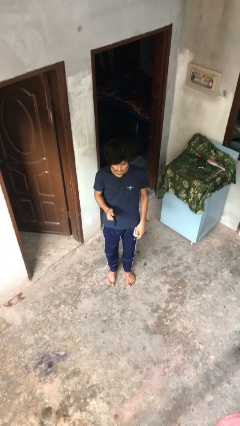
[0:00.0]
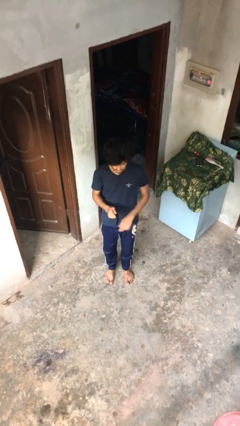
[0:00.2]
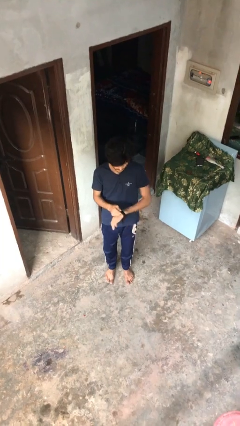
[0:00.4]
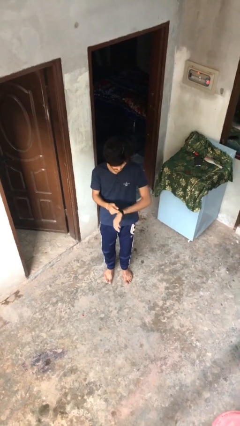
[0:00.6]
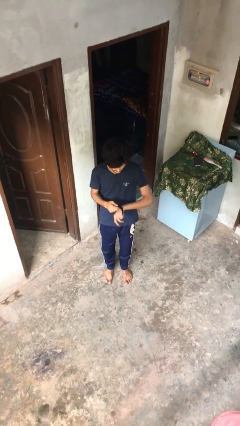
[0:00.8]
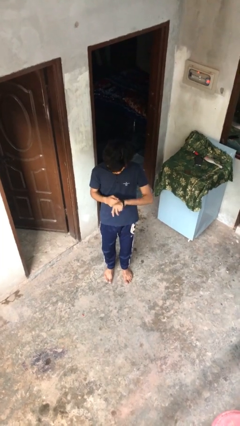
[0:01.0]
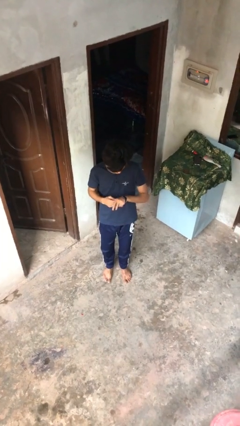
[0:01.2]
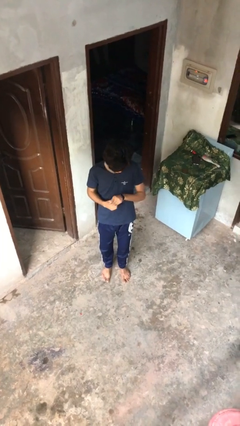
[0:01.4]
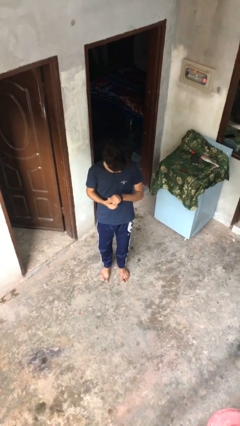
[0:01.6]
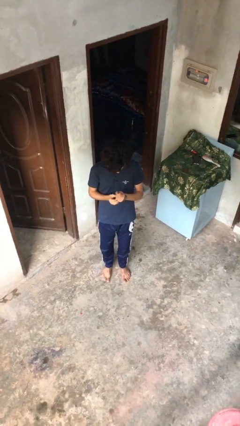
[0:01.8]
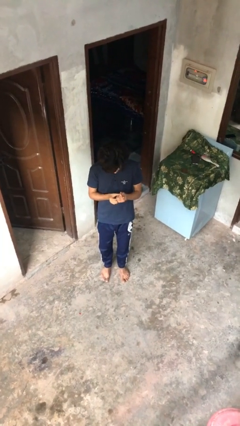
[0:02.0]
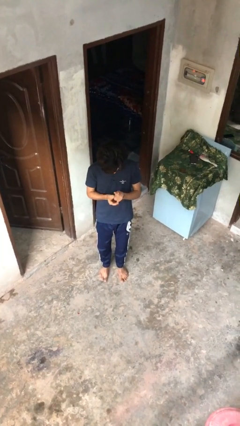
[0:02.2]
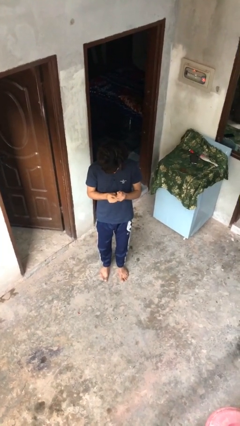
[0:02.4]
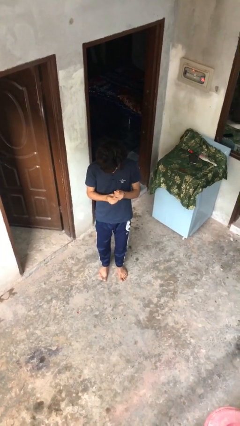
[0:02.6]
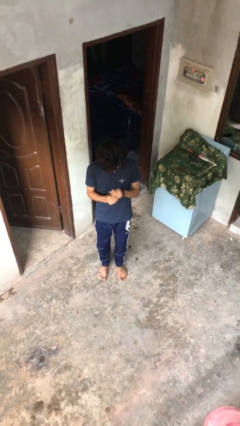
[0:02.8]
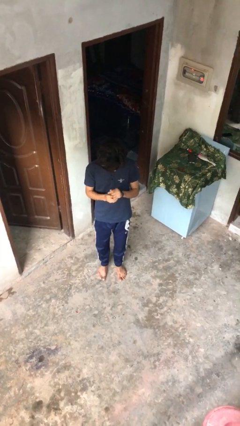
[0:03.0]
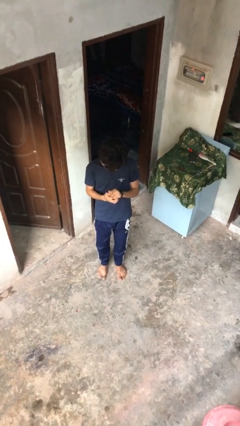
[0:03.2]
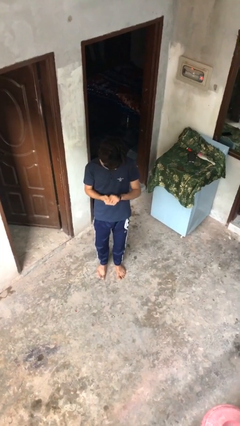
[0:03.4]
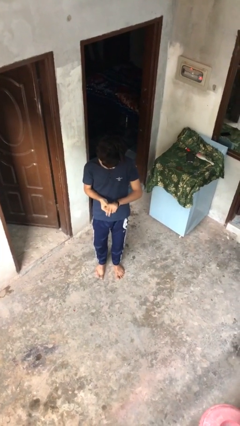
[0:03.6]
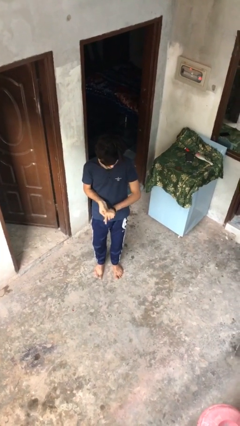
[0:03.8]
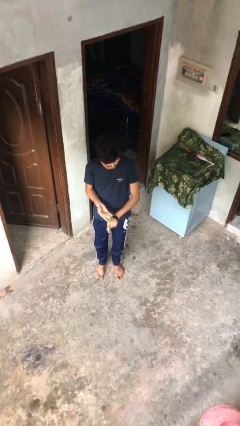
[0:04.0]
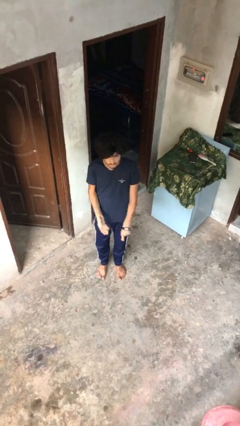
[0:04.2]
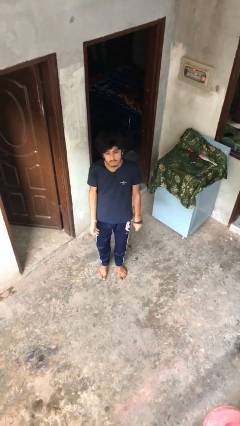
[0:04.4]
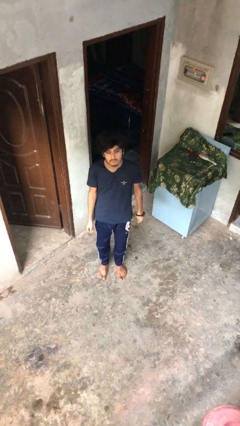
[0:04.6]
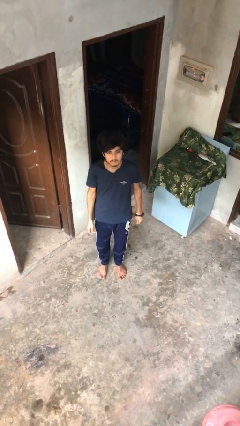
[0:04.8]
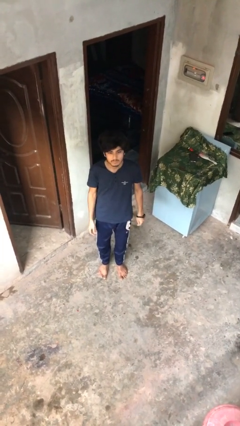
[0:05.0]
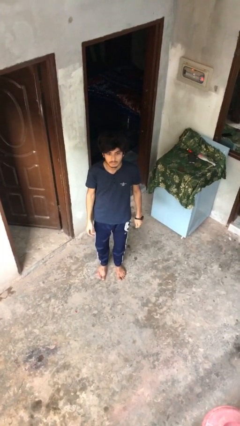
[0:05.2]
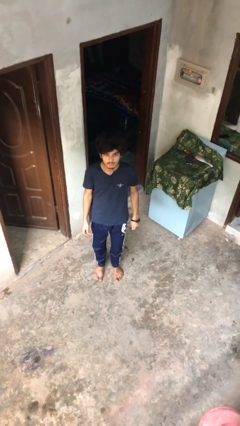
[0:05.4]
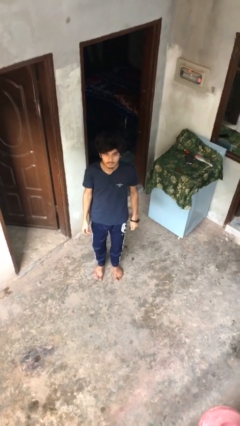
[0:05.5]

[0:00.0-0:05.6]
person puts on wristwatch

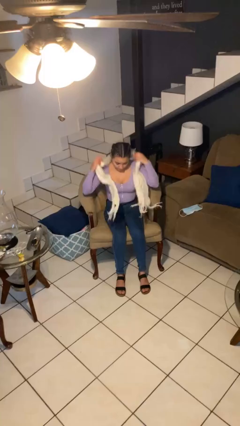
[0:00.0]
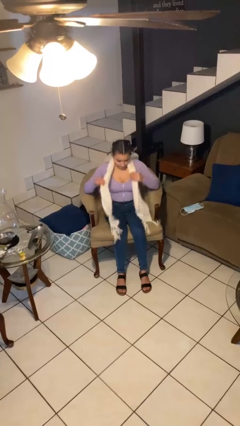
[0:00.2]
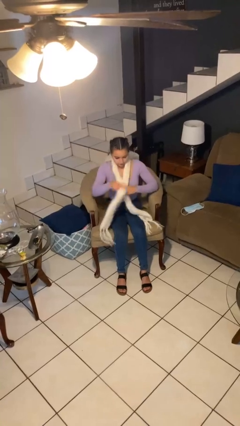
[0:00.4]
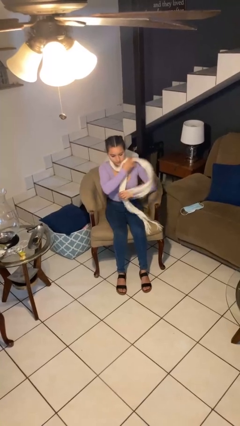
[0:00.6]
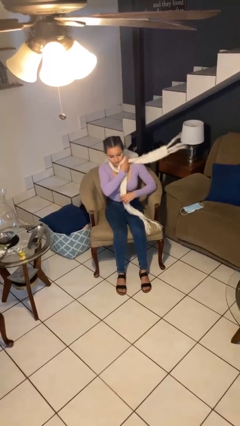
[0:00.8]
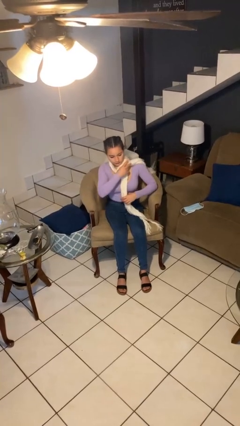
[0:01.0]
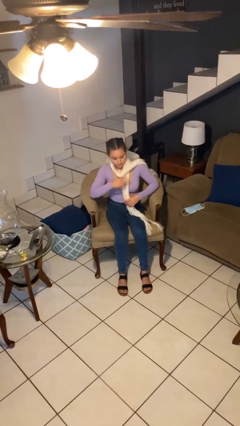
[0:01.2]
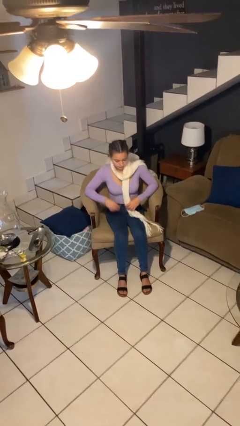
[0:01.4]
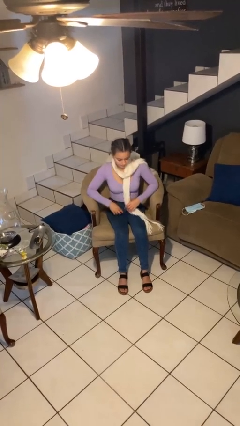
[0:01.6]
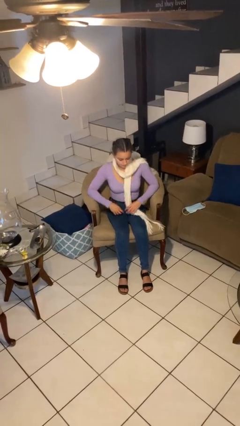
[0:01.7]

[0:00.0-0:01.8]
person puts on scarf

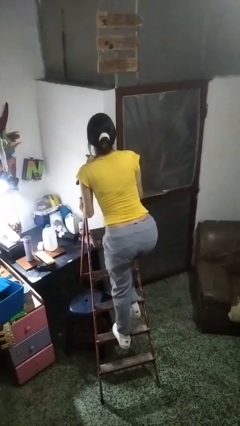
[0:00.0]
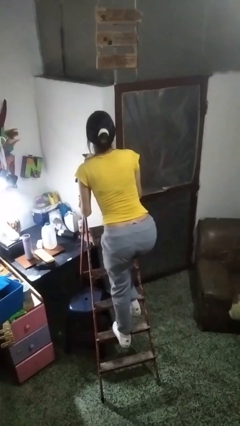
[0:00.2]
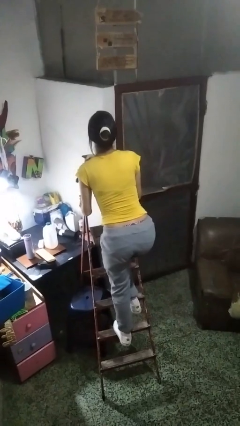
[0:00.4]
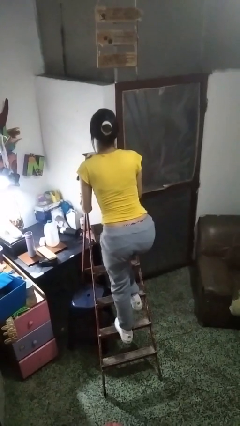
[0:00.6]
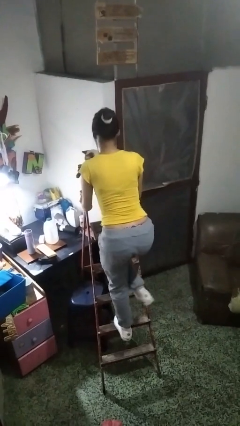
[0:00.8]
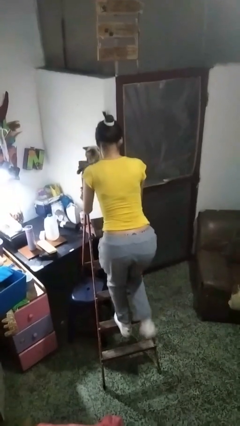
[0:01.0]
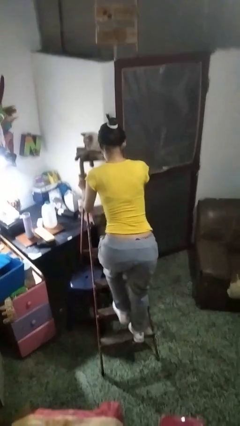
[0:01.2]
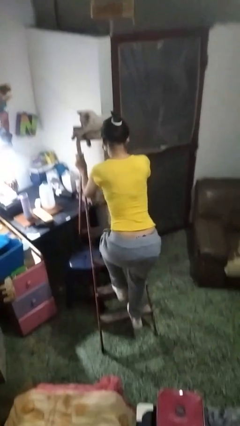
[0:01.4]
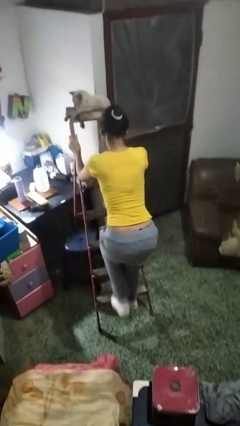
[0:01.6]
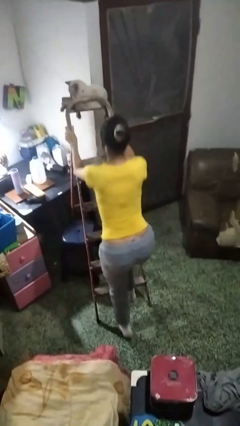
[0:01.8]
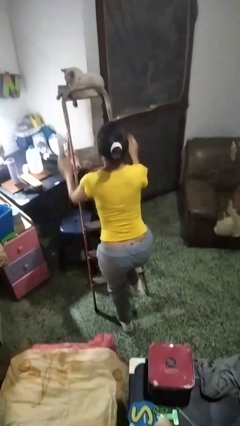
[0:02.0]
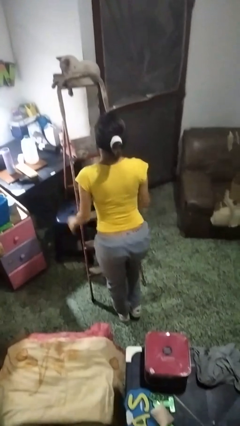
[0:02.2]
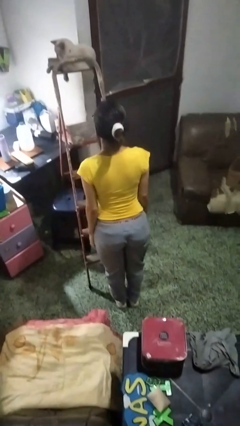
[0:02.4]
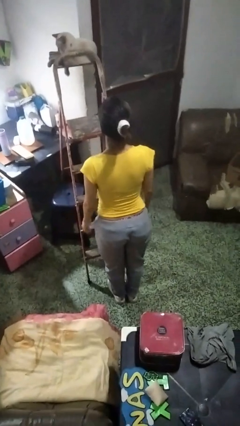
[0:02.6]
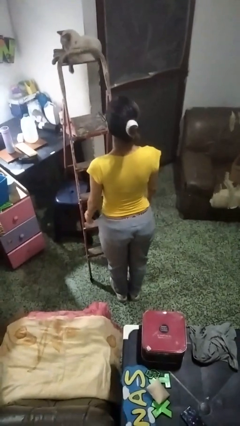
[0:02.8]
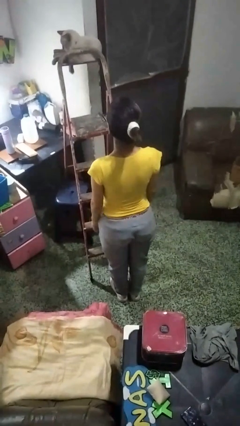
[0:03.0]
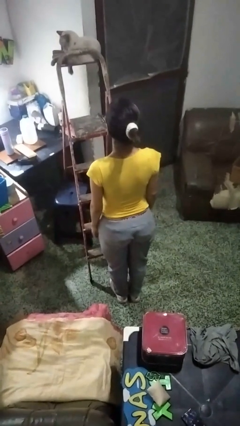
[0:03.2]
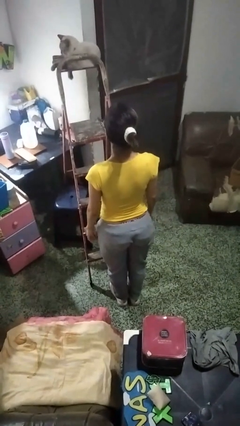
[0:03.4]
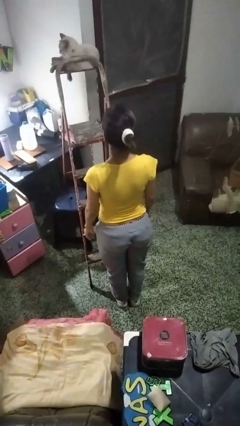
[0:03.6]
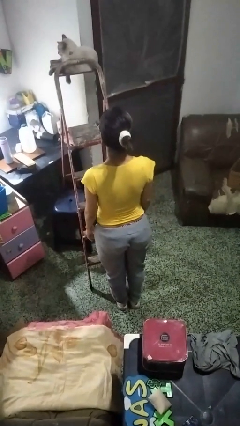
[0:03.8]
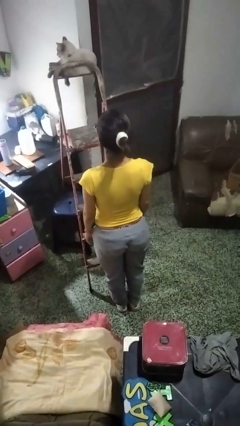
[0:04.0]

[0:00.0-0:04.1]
person climbs down ladder

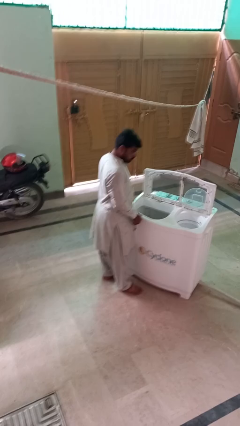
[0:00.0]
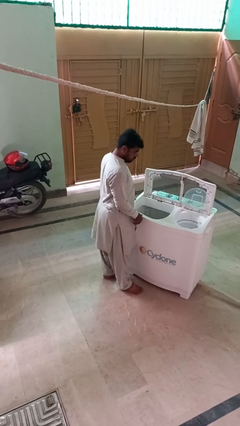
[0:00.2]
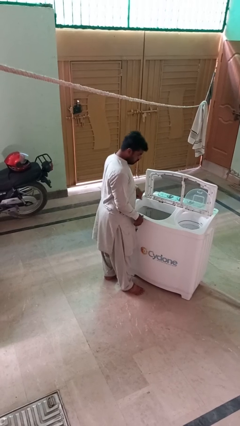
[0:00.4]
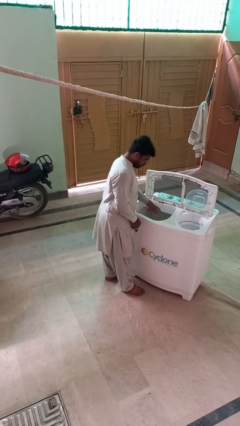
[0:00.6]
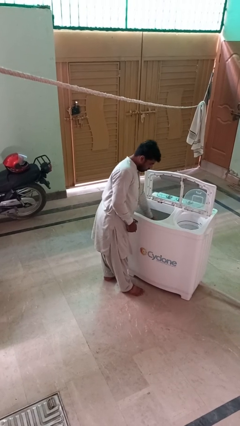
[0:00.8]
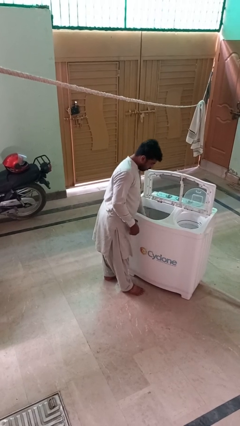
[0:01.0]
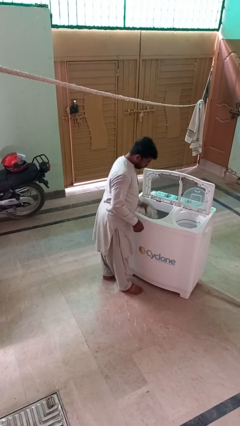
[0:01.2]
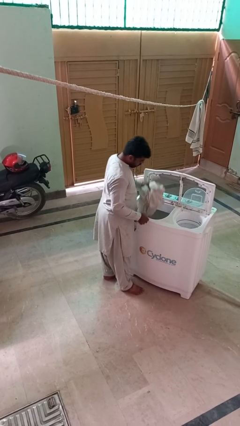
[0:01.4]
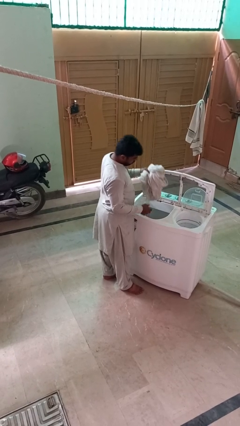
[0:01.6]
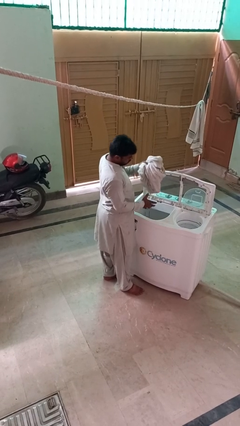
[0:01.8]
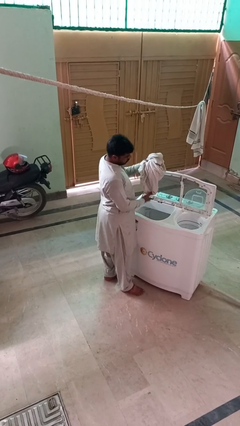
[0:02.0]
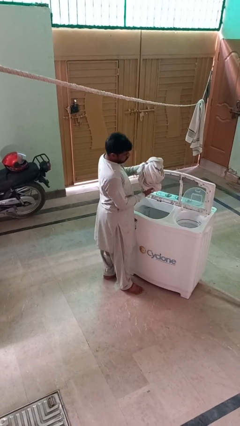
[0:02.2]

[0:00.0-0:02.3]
person unloads clotheswasher

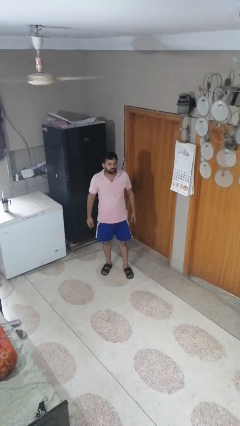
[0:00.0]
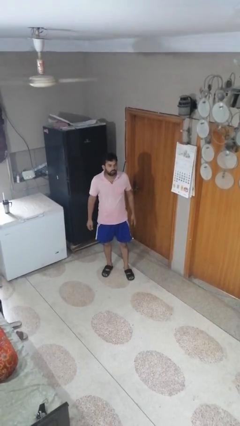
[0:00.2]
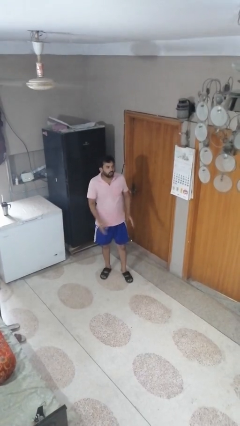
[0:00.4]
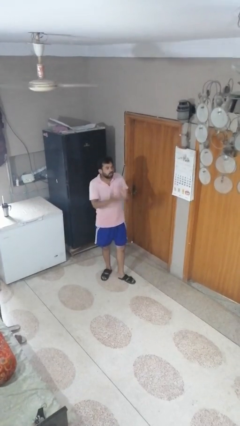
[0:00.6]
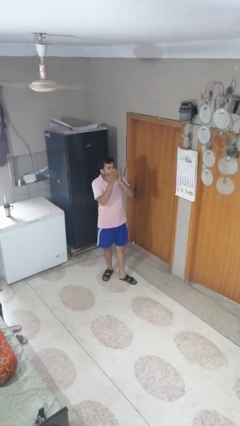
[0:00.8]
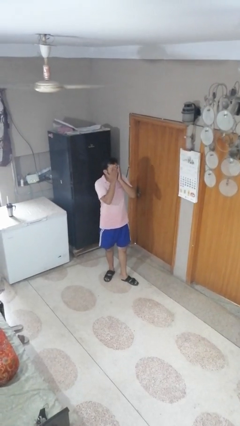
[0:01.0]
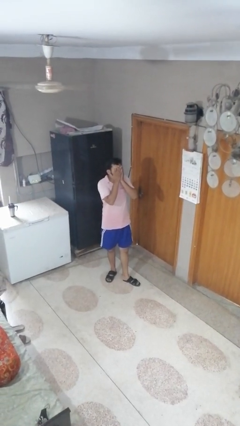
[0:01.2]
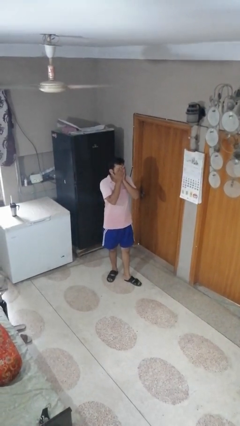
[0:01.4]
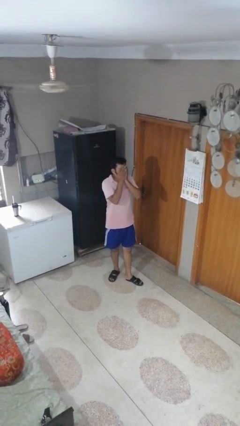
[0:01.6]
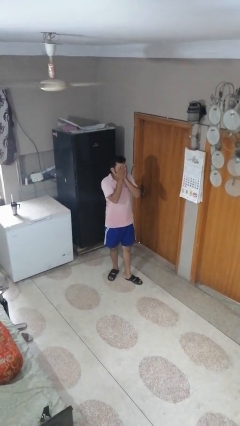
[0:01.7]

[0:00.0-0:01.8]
person covers face with hands

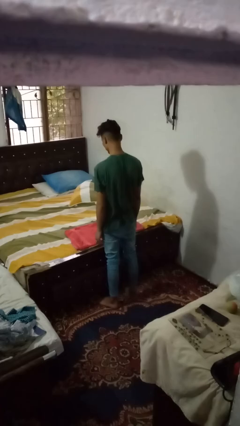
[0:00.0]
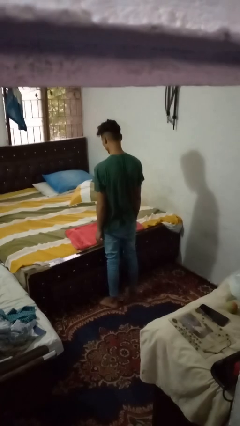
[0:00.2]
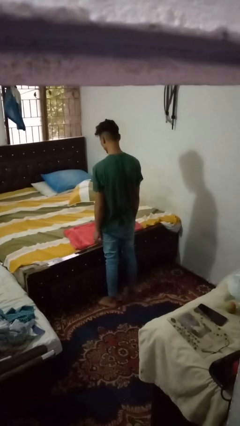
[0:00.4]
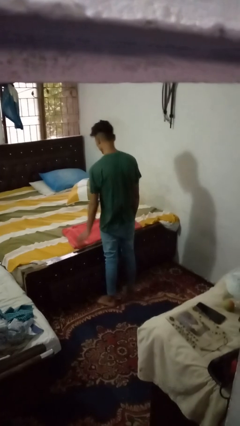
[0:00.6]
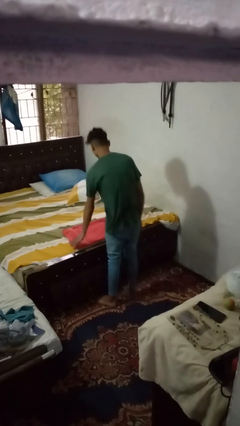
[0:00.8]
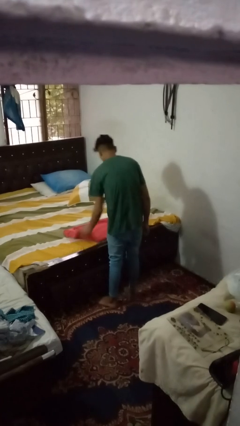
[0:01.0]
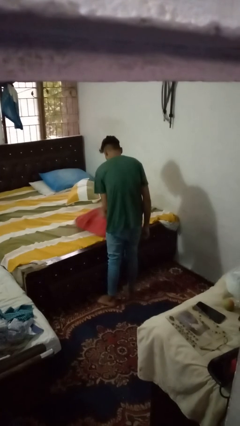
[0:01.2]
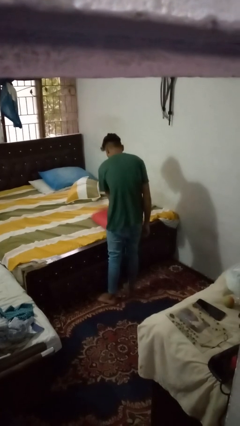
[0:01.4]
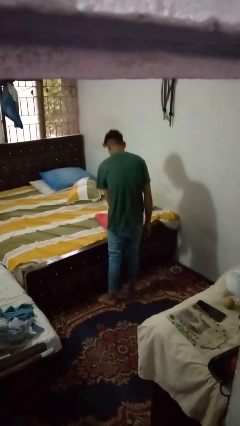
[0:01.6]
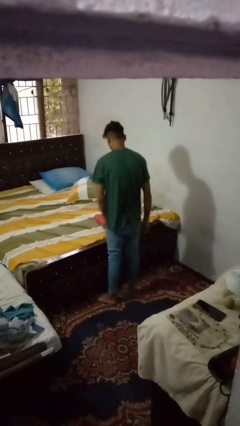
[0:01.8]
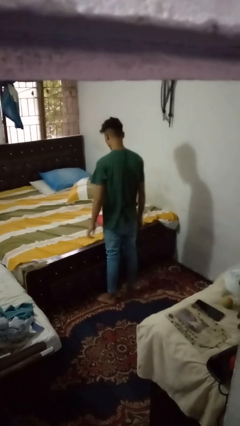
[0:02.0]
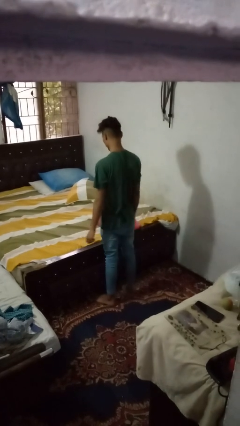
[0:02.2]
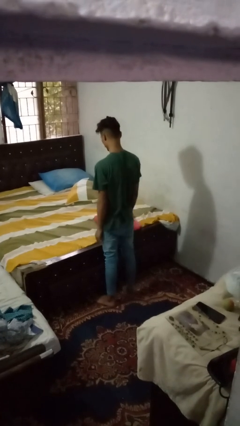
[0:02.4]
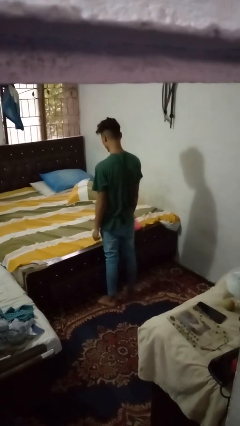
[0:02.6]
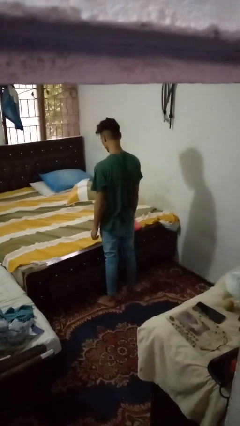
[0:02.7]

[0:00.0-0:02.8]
person folds towel
